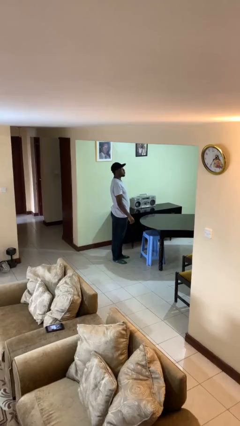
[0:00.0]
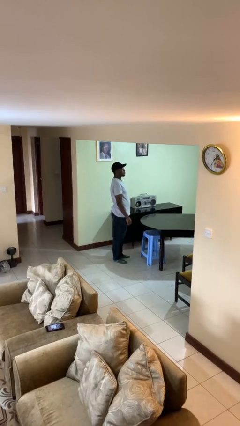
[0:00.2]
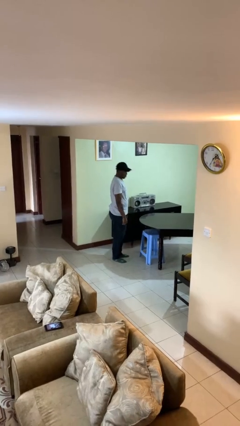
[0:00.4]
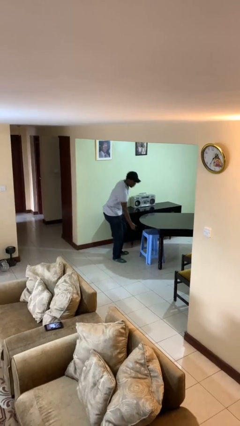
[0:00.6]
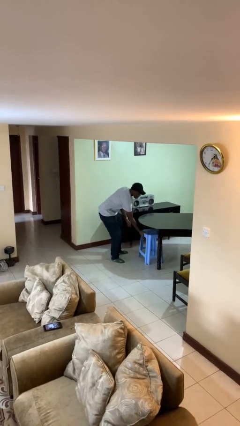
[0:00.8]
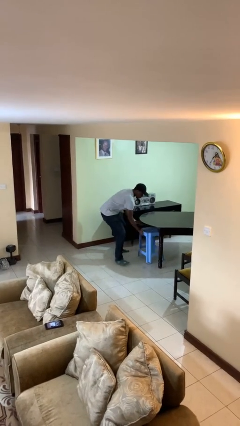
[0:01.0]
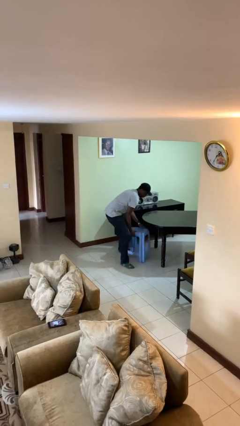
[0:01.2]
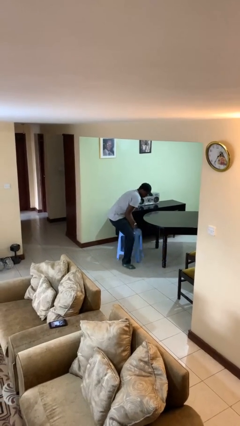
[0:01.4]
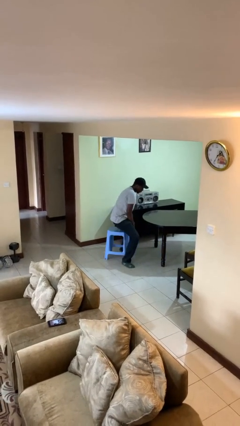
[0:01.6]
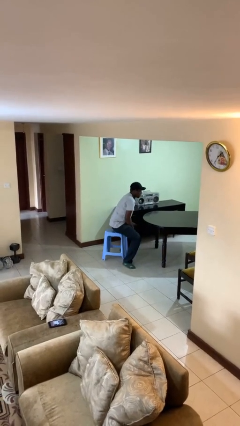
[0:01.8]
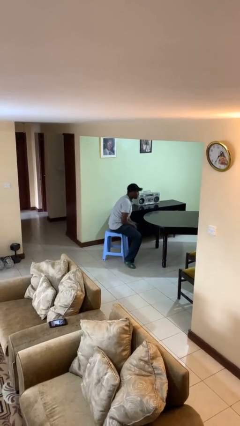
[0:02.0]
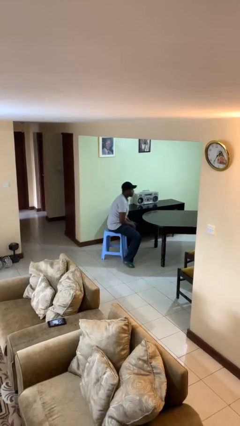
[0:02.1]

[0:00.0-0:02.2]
person sits down

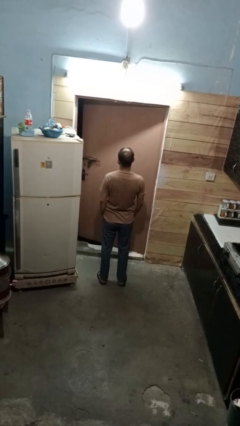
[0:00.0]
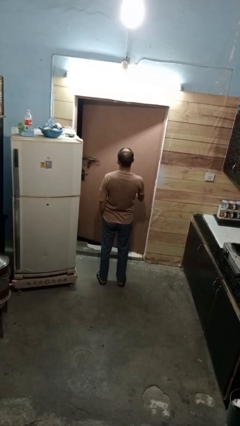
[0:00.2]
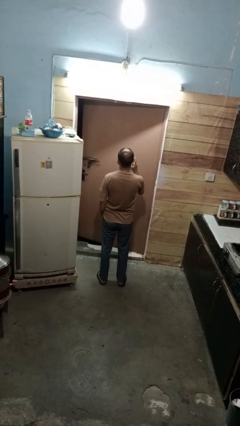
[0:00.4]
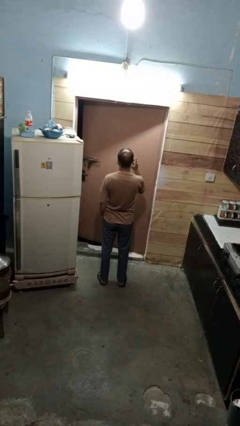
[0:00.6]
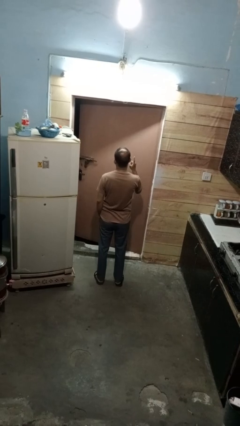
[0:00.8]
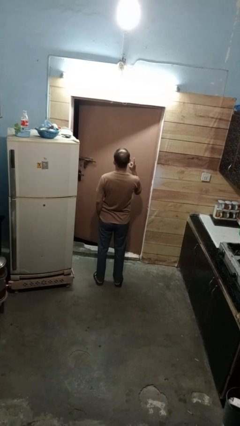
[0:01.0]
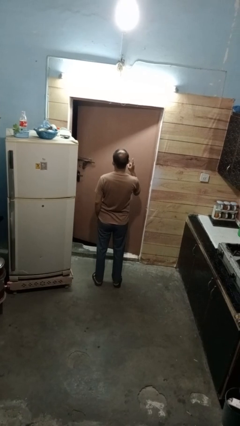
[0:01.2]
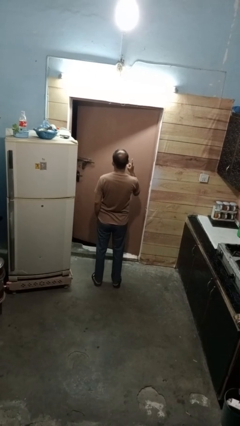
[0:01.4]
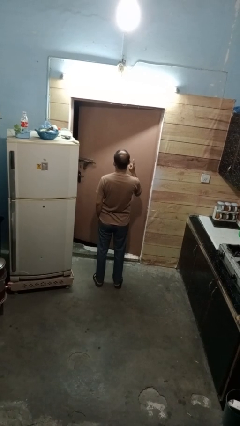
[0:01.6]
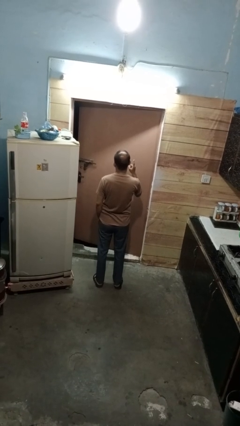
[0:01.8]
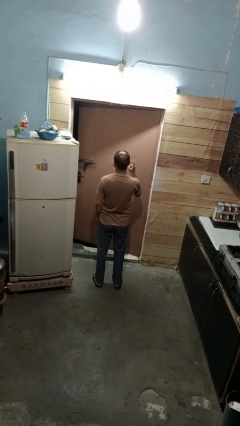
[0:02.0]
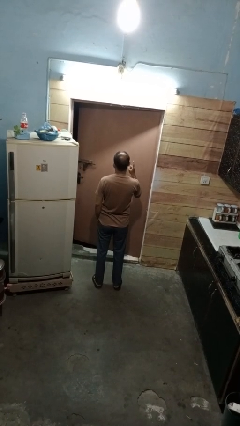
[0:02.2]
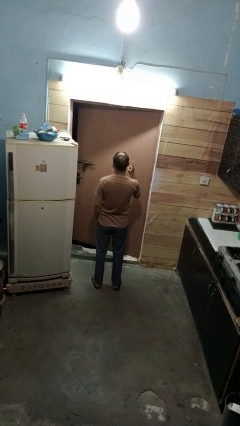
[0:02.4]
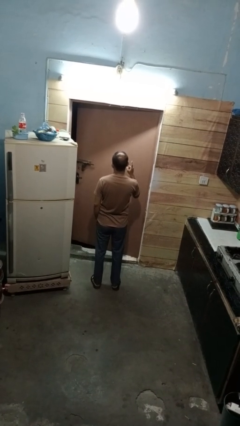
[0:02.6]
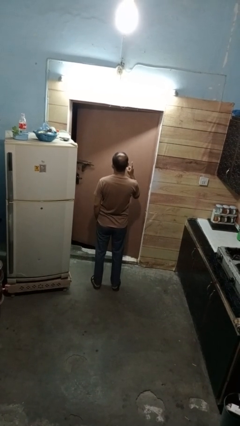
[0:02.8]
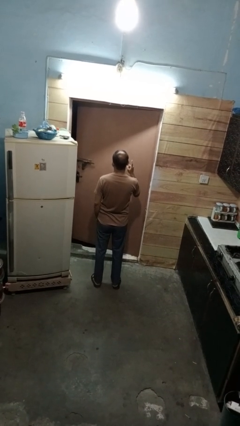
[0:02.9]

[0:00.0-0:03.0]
person gestures number one

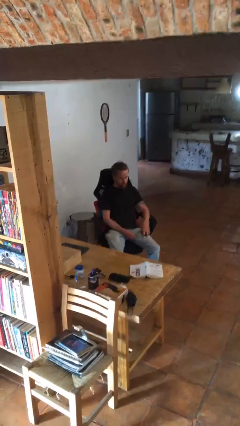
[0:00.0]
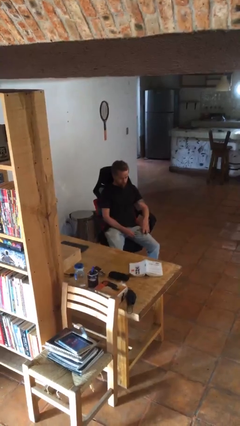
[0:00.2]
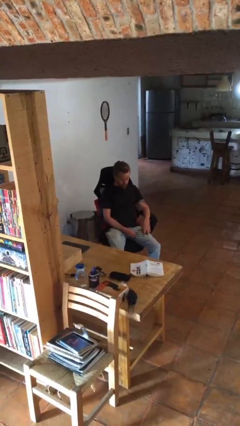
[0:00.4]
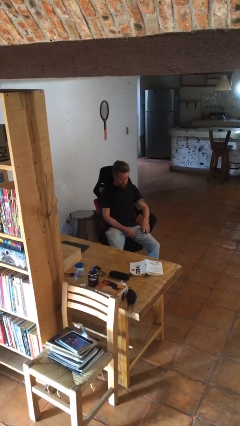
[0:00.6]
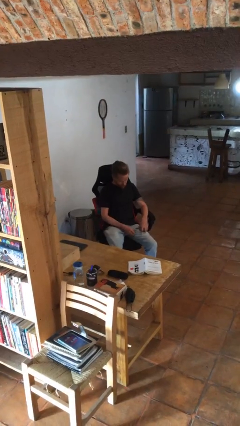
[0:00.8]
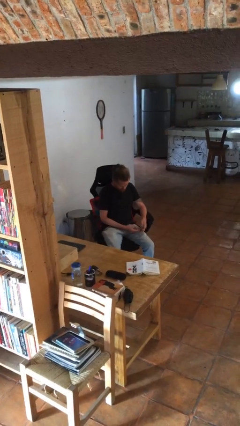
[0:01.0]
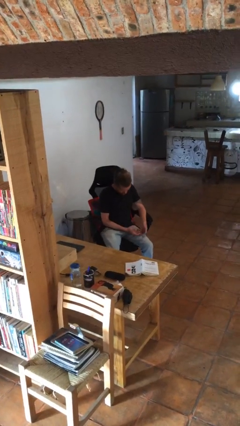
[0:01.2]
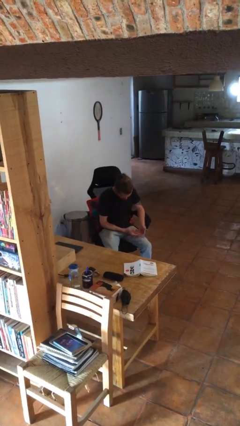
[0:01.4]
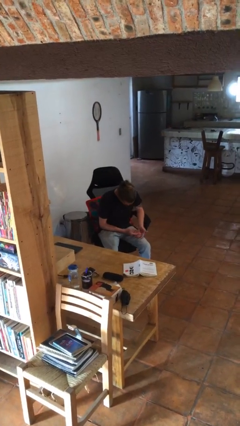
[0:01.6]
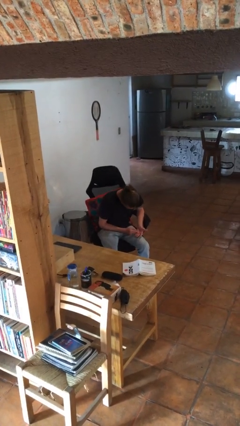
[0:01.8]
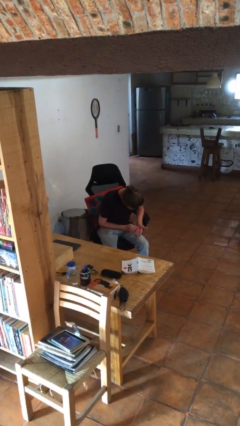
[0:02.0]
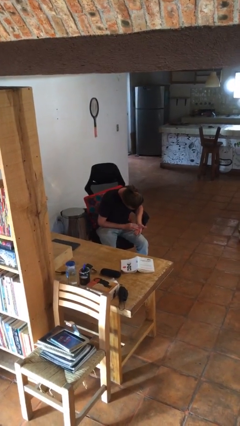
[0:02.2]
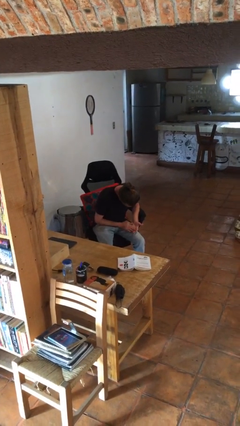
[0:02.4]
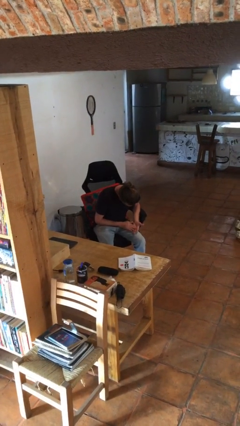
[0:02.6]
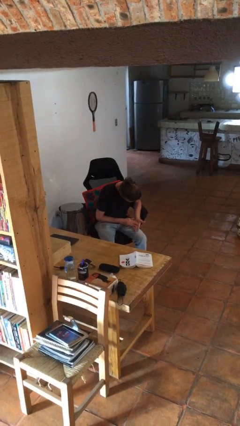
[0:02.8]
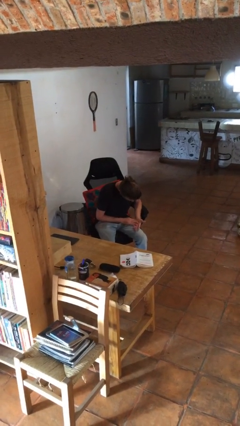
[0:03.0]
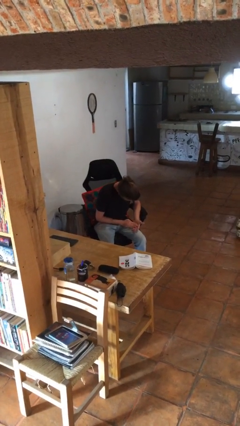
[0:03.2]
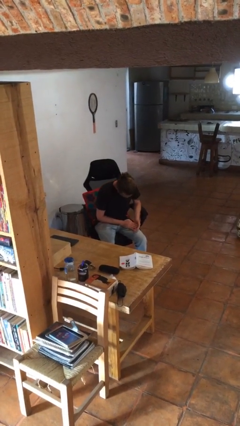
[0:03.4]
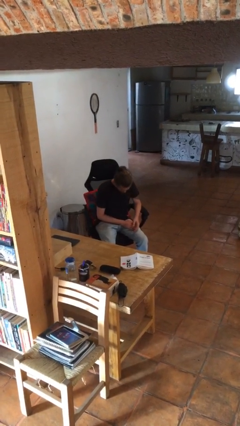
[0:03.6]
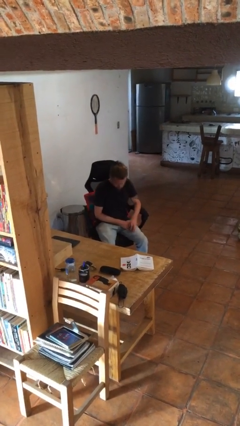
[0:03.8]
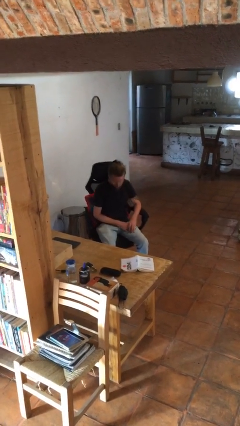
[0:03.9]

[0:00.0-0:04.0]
person looks at hands in lap

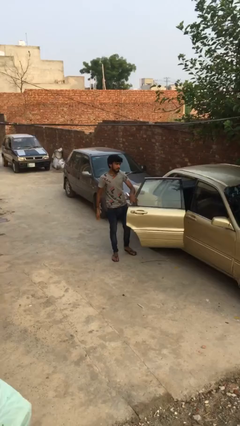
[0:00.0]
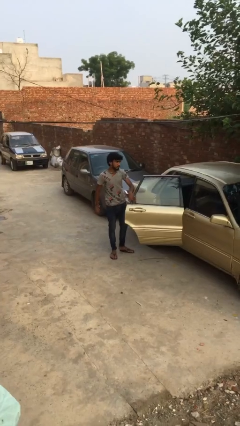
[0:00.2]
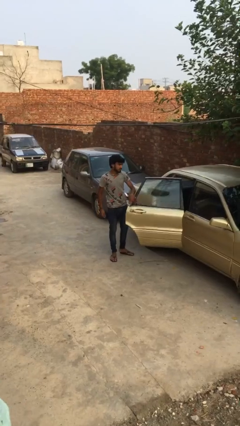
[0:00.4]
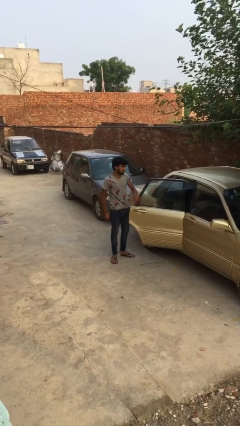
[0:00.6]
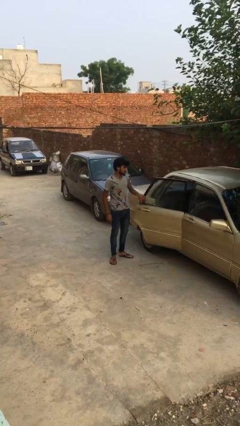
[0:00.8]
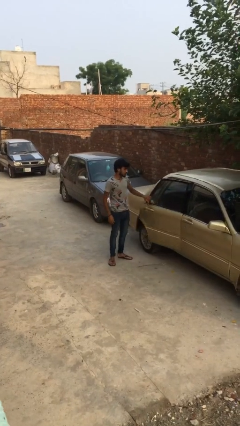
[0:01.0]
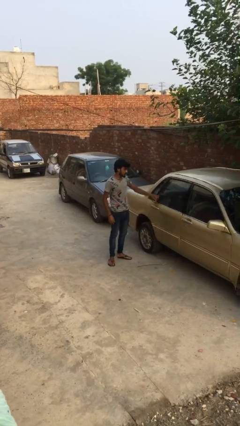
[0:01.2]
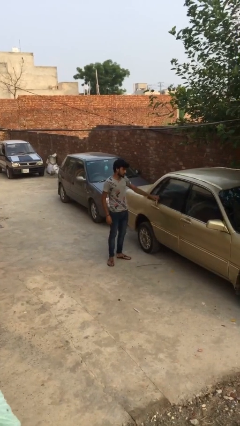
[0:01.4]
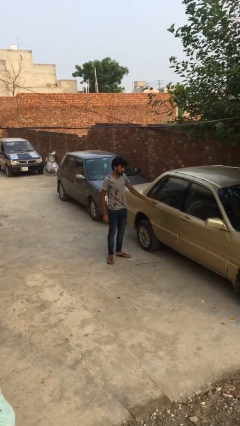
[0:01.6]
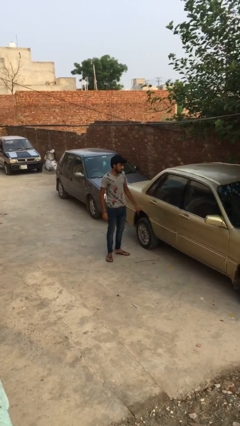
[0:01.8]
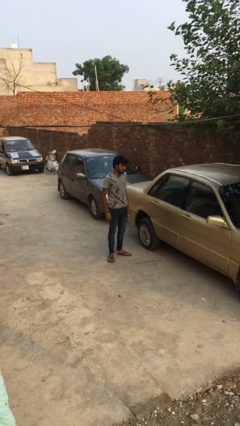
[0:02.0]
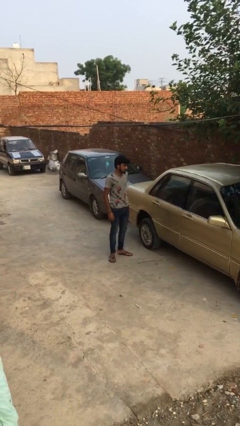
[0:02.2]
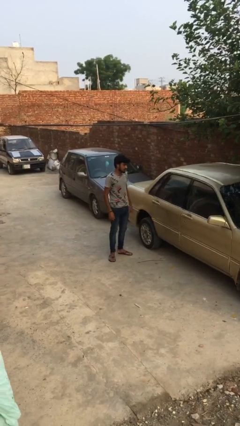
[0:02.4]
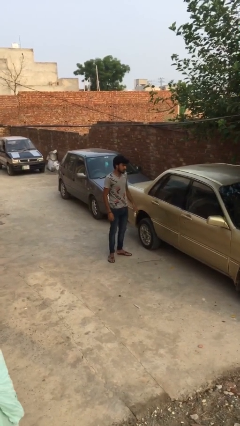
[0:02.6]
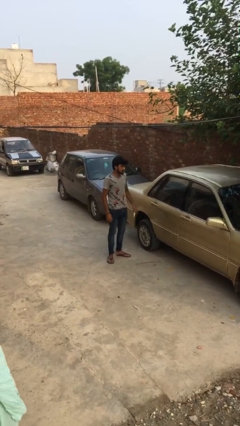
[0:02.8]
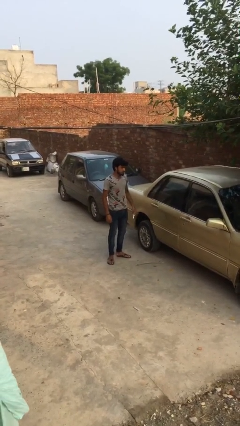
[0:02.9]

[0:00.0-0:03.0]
person closes car door

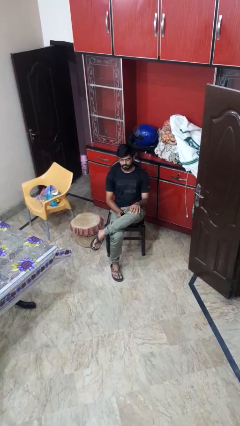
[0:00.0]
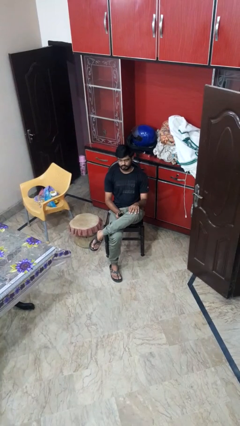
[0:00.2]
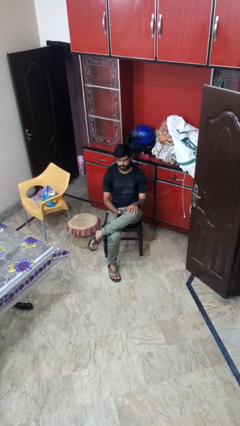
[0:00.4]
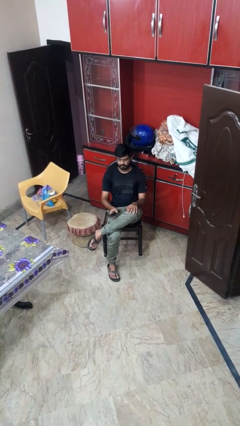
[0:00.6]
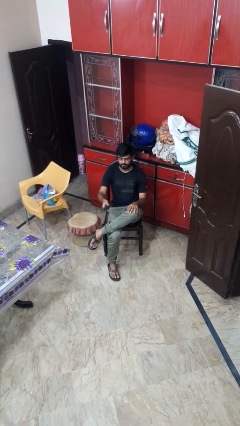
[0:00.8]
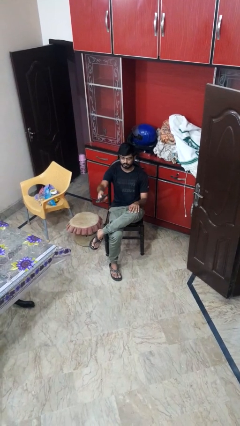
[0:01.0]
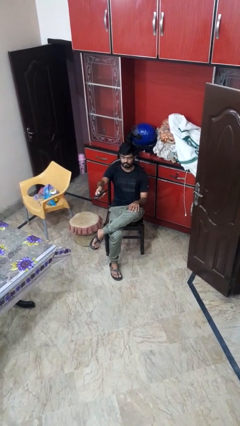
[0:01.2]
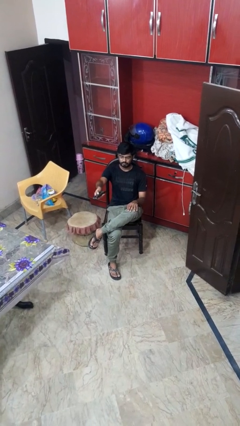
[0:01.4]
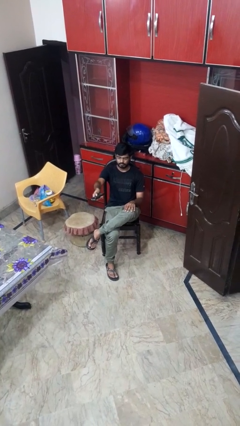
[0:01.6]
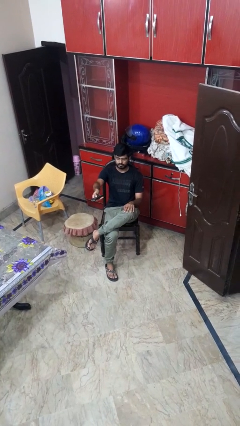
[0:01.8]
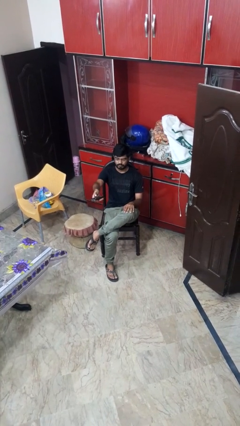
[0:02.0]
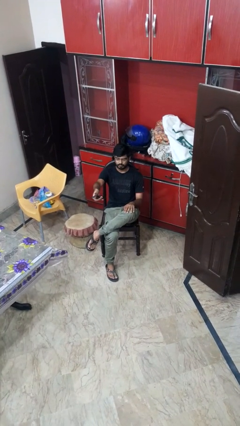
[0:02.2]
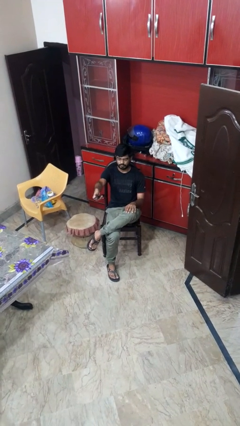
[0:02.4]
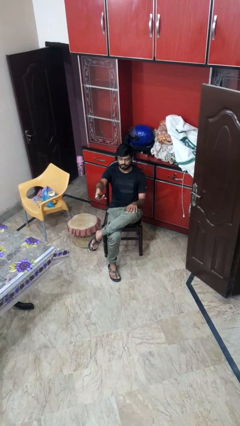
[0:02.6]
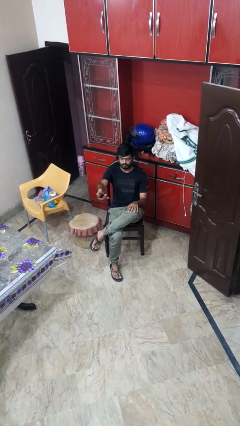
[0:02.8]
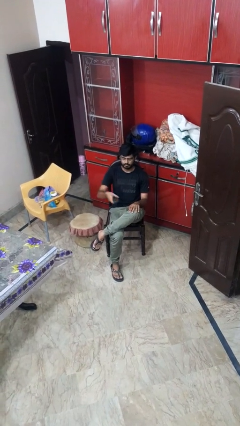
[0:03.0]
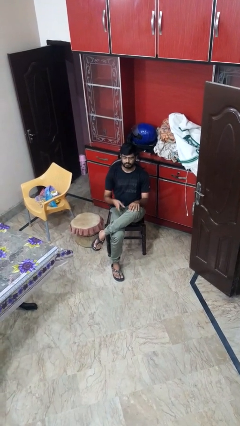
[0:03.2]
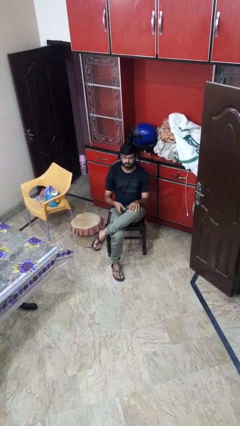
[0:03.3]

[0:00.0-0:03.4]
person uses television remote

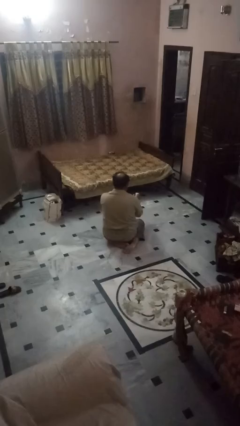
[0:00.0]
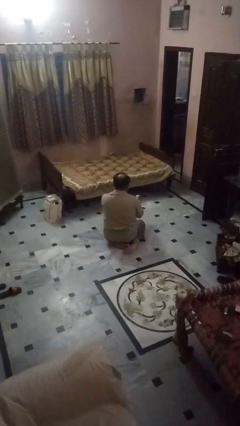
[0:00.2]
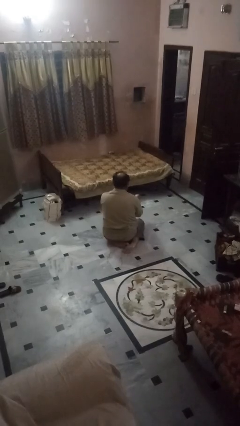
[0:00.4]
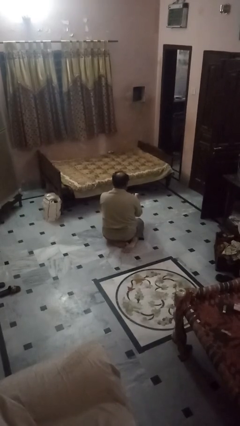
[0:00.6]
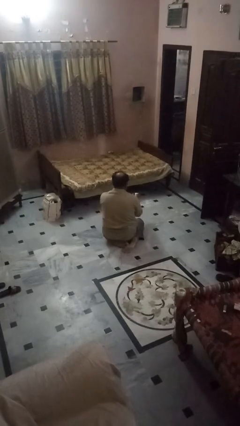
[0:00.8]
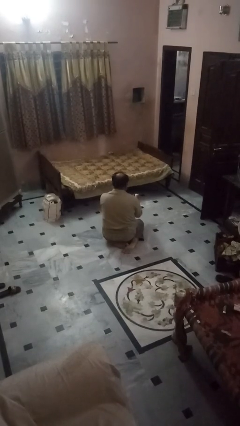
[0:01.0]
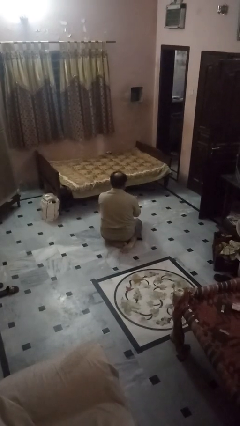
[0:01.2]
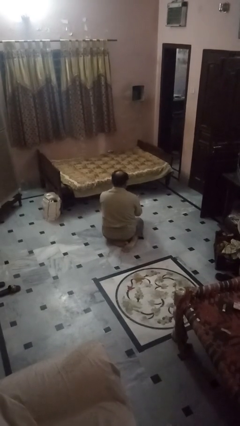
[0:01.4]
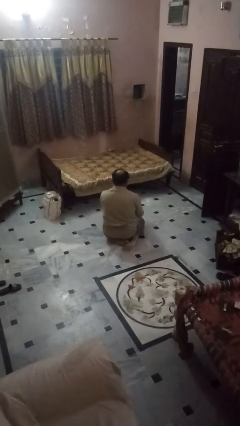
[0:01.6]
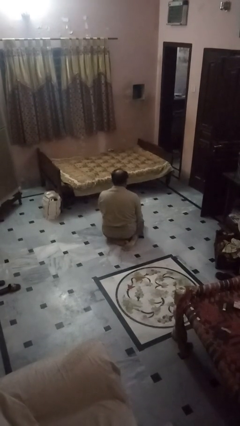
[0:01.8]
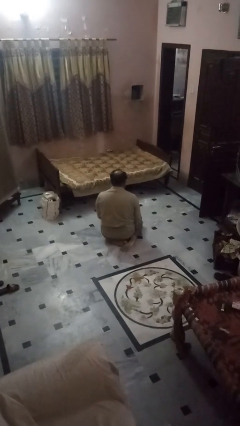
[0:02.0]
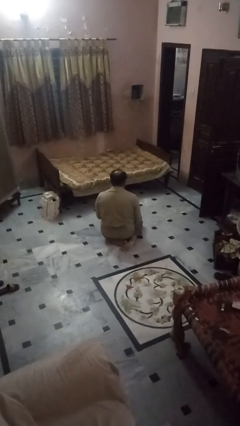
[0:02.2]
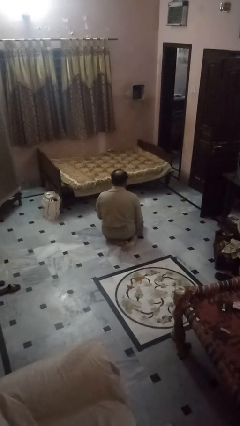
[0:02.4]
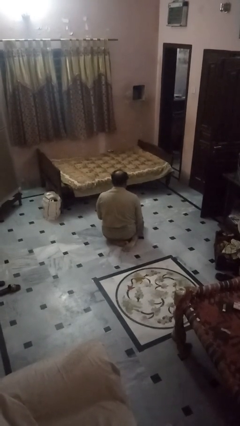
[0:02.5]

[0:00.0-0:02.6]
person catches dropped object
